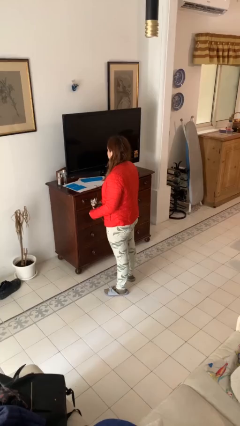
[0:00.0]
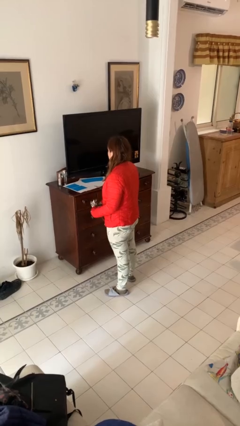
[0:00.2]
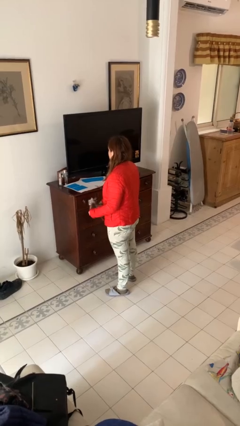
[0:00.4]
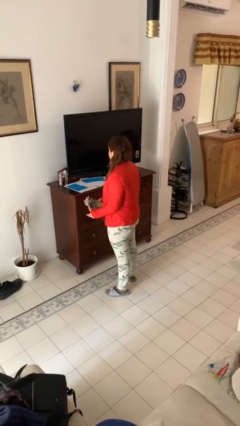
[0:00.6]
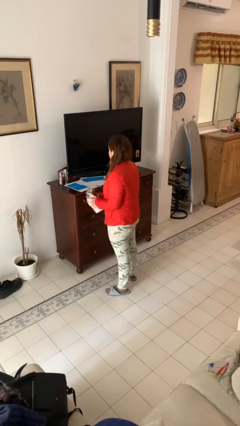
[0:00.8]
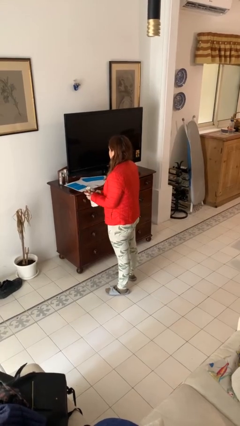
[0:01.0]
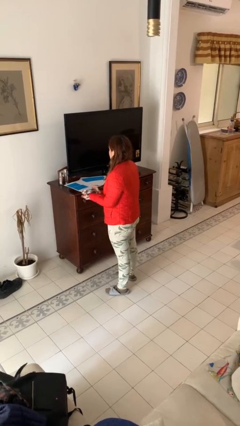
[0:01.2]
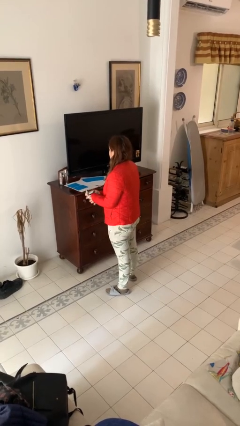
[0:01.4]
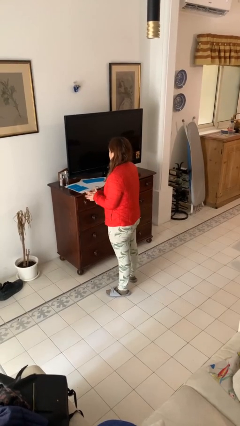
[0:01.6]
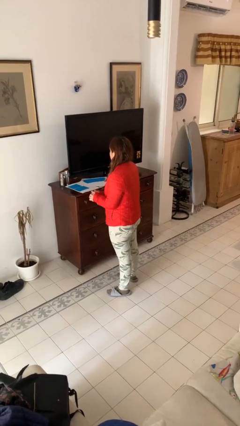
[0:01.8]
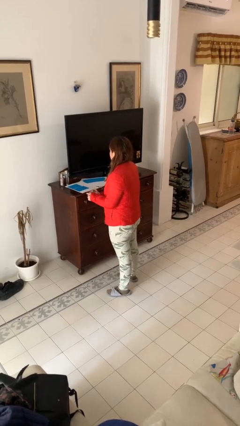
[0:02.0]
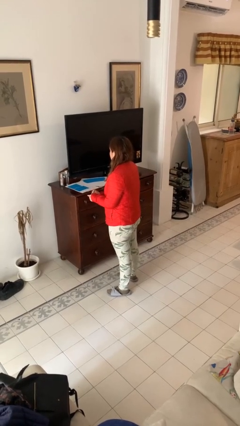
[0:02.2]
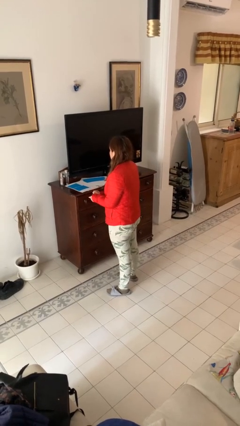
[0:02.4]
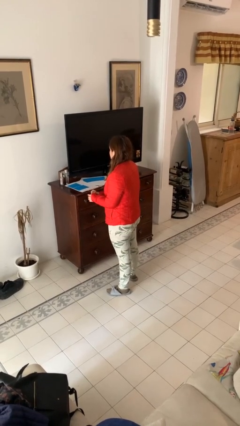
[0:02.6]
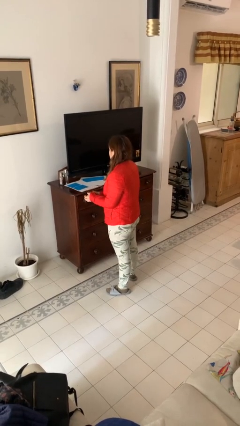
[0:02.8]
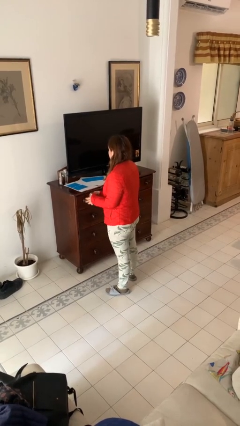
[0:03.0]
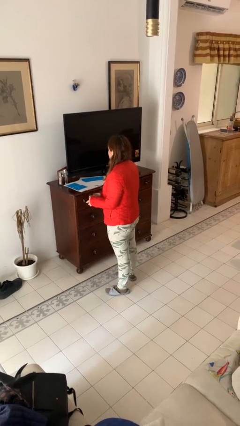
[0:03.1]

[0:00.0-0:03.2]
person crumples paper

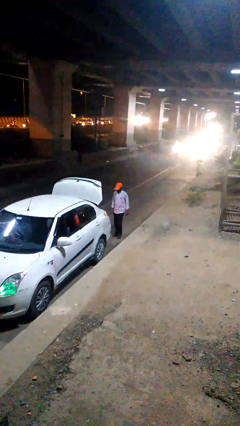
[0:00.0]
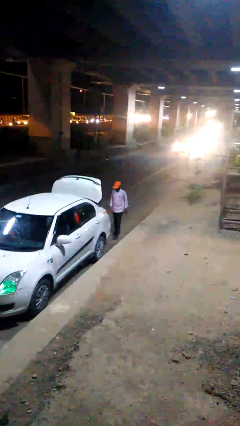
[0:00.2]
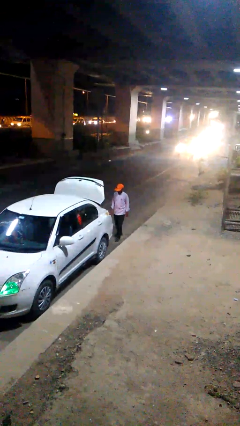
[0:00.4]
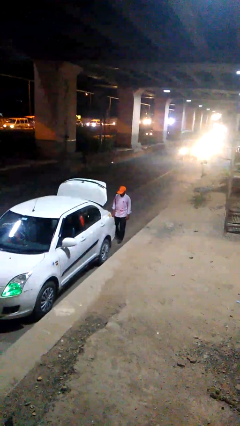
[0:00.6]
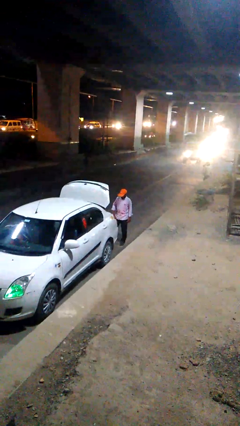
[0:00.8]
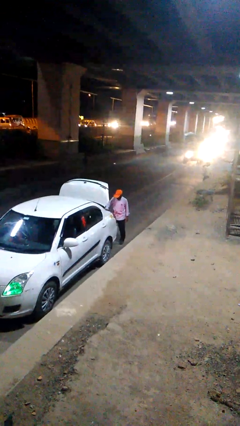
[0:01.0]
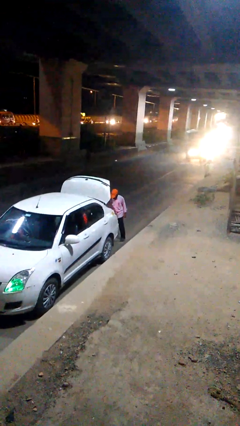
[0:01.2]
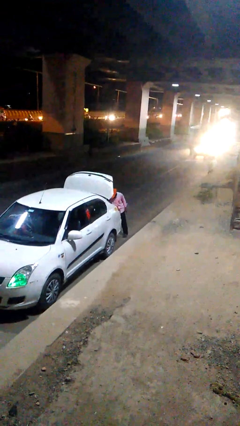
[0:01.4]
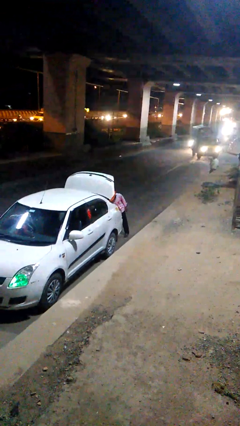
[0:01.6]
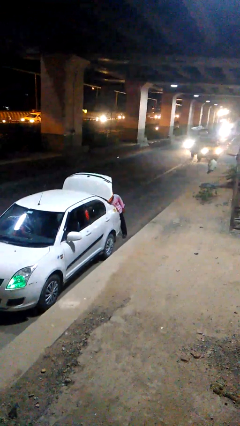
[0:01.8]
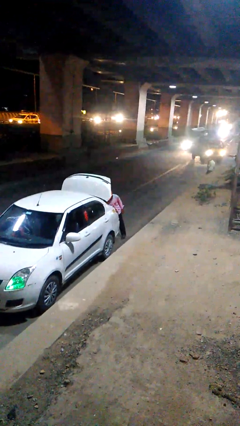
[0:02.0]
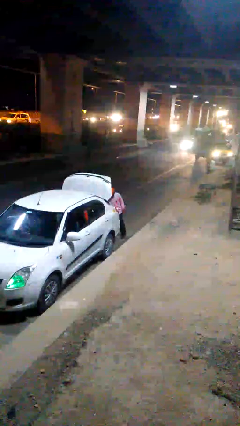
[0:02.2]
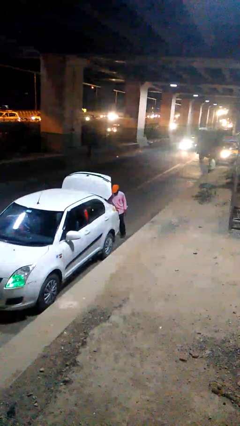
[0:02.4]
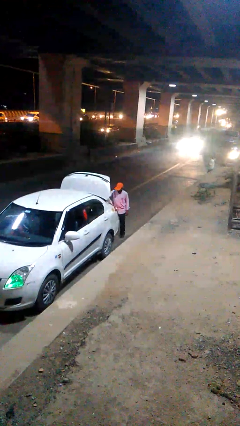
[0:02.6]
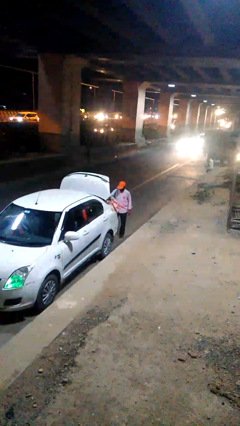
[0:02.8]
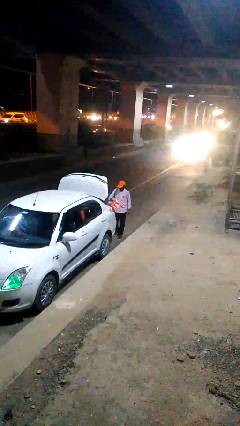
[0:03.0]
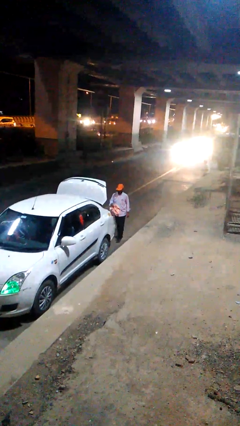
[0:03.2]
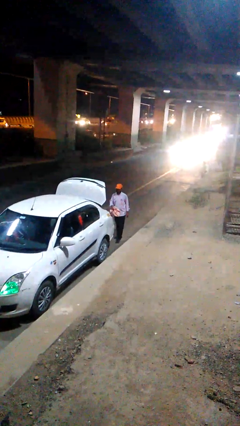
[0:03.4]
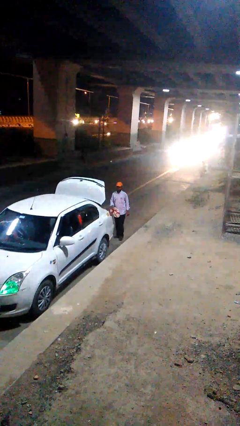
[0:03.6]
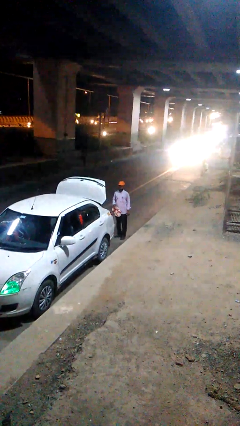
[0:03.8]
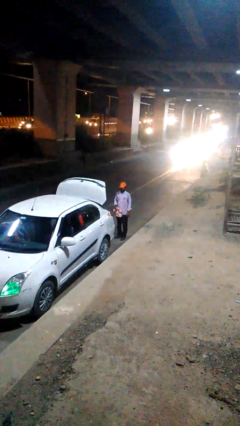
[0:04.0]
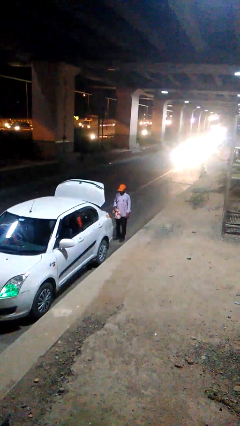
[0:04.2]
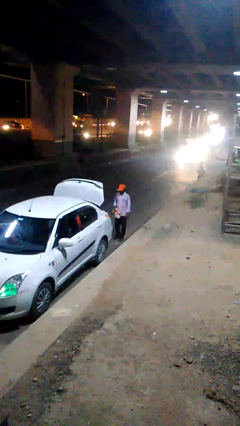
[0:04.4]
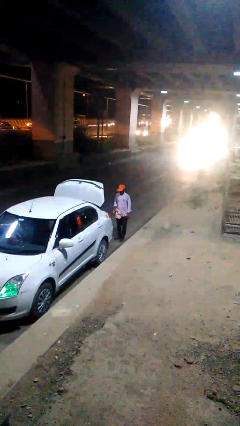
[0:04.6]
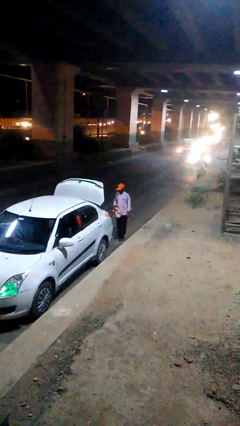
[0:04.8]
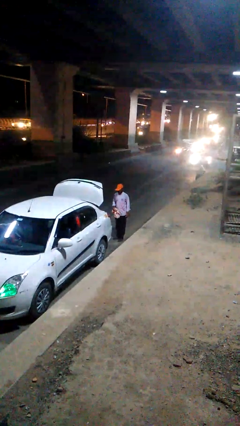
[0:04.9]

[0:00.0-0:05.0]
person unloads car

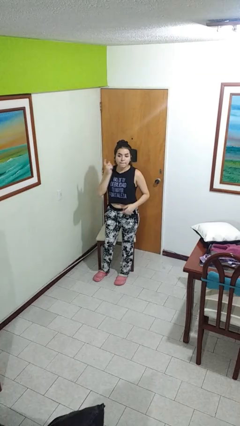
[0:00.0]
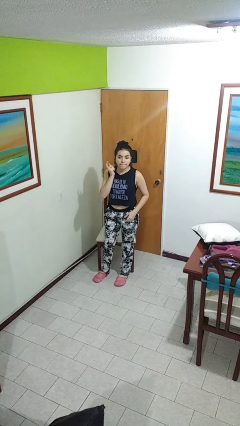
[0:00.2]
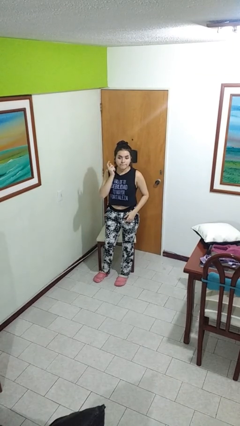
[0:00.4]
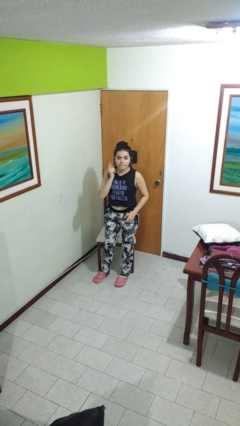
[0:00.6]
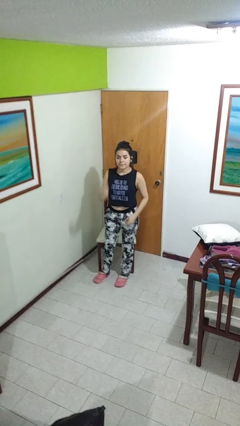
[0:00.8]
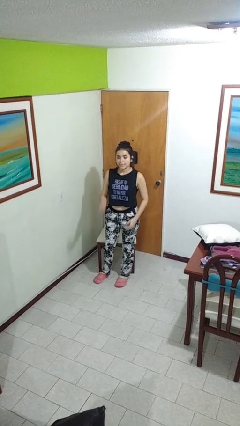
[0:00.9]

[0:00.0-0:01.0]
person gestures listen closely

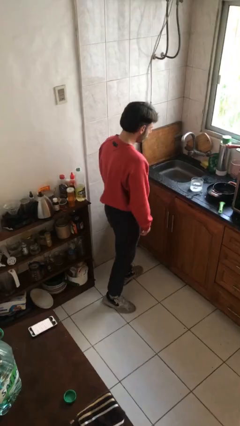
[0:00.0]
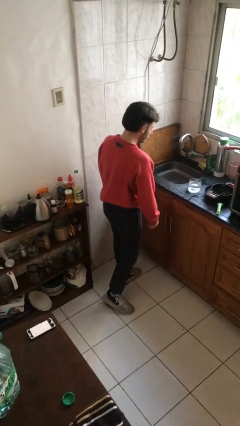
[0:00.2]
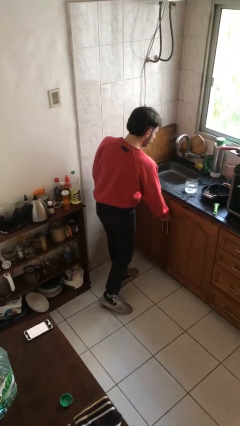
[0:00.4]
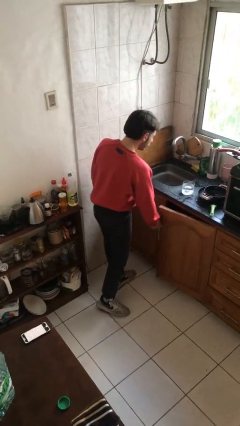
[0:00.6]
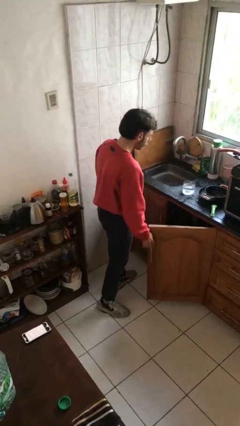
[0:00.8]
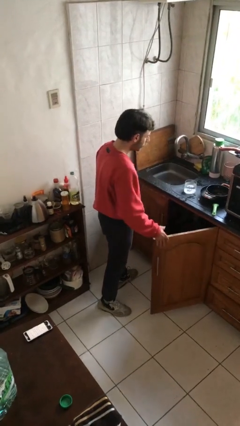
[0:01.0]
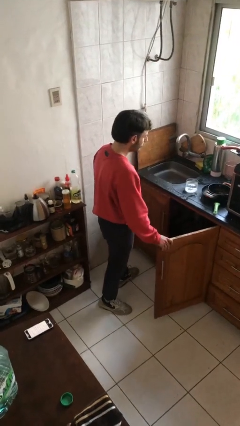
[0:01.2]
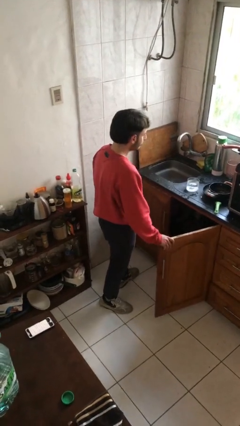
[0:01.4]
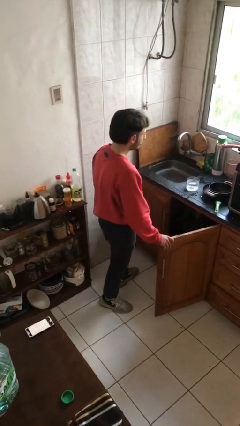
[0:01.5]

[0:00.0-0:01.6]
person opens cabinet

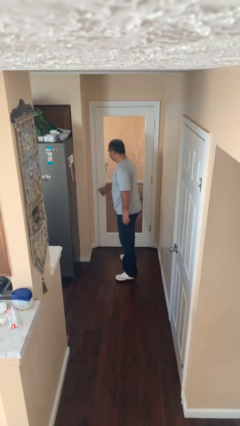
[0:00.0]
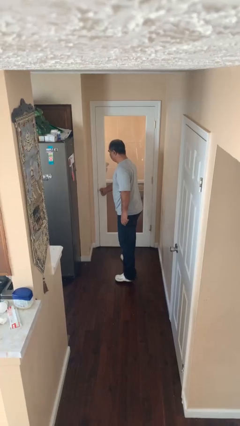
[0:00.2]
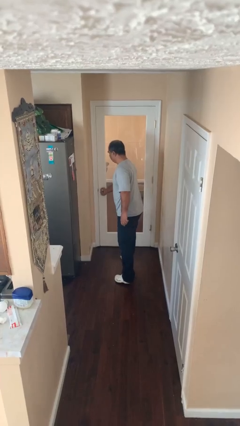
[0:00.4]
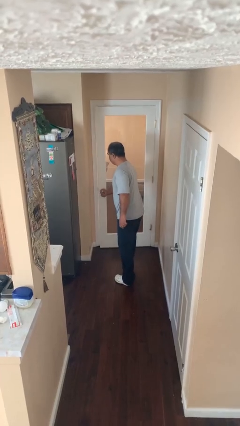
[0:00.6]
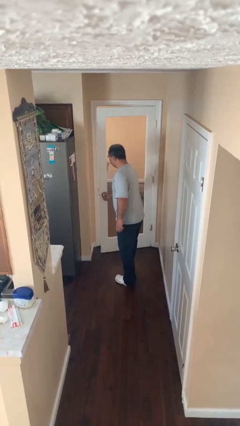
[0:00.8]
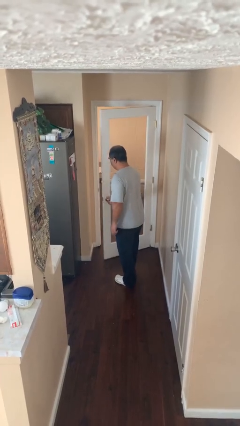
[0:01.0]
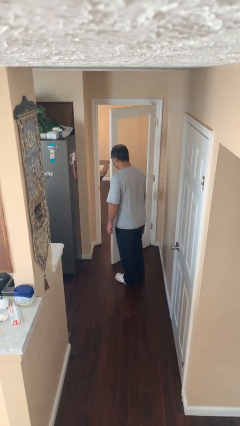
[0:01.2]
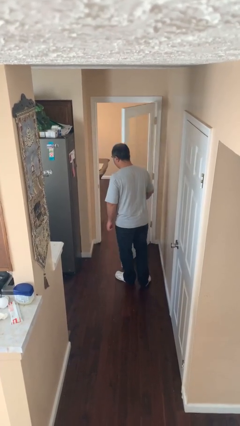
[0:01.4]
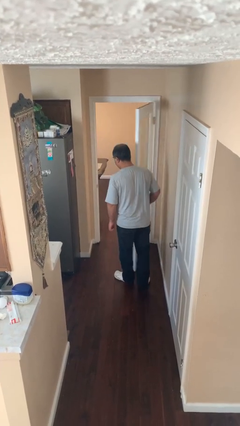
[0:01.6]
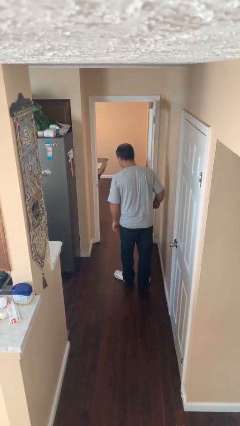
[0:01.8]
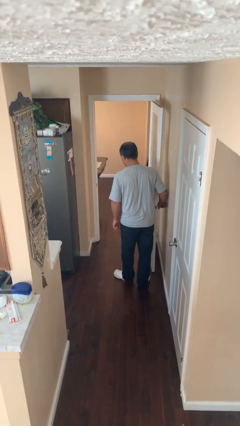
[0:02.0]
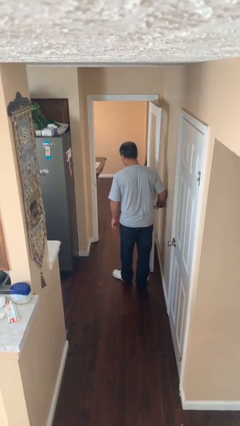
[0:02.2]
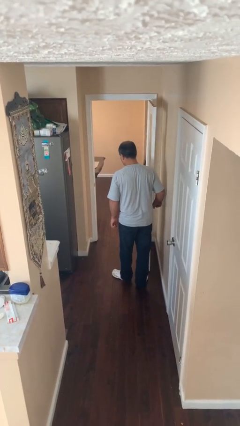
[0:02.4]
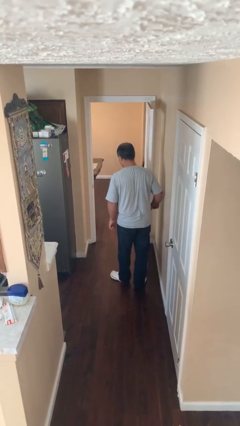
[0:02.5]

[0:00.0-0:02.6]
person opens facility door

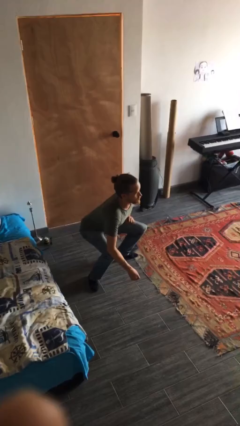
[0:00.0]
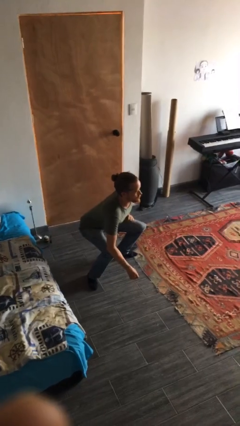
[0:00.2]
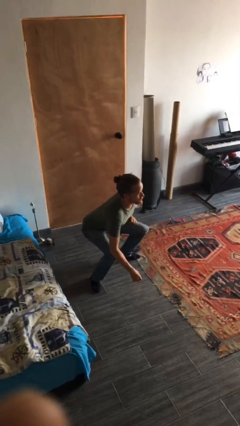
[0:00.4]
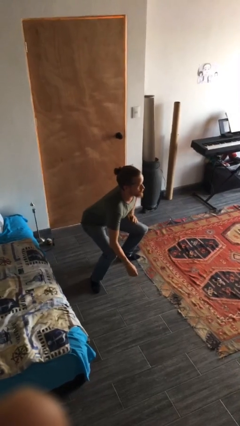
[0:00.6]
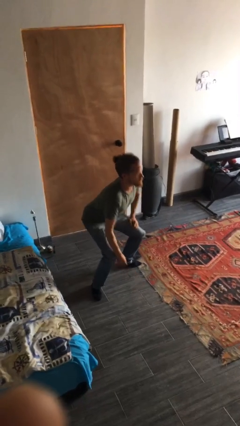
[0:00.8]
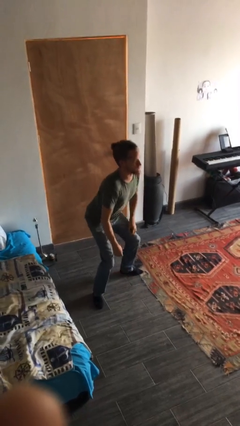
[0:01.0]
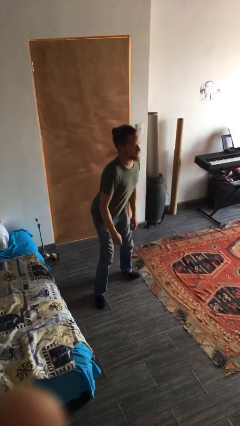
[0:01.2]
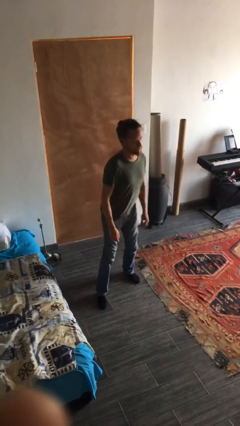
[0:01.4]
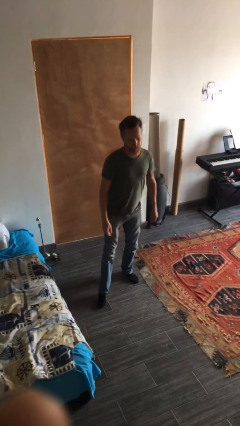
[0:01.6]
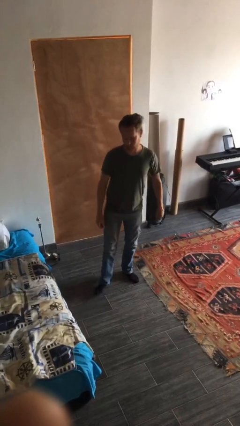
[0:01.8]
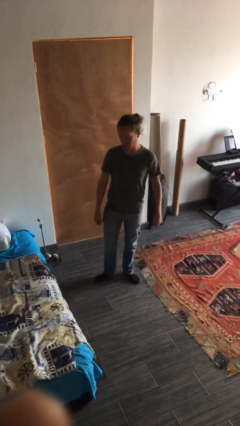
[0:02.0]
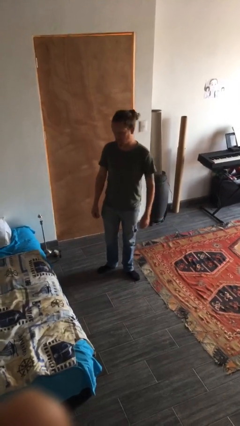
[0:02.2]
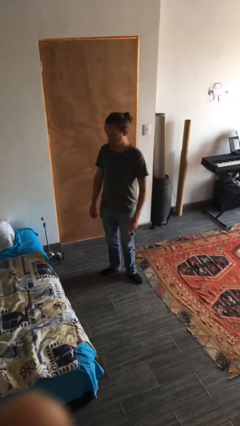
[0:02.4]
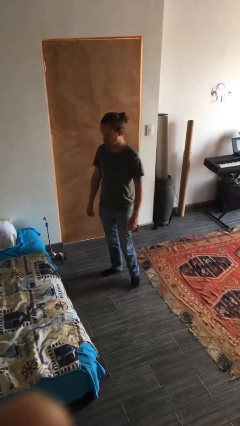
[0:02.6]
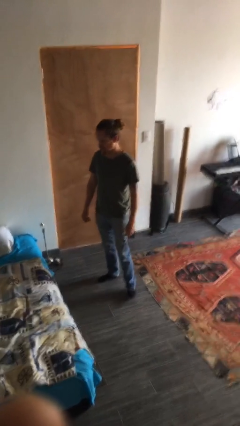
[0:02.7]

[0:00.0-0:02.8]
person stands up

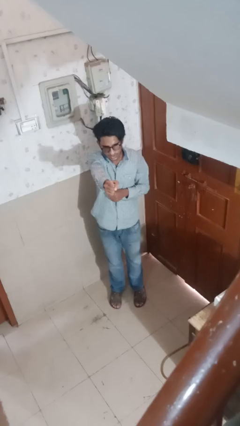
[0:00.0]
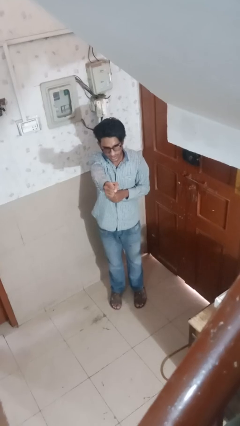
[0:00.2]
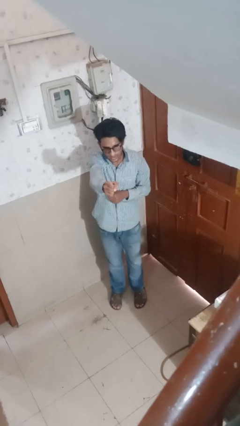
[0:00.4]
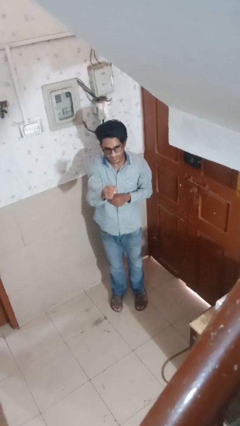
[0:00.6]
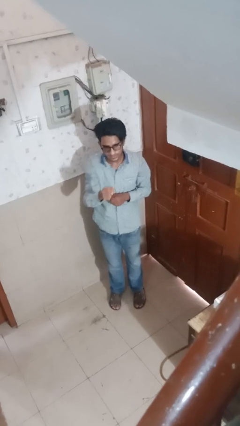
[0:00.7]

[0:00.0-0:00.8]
person punches
